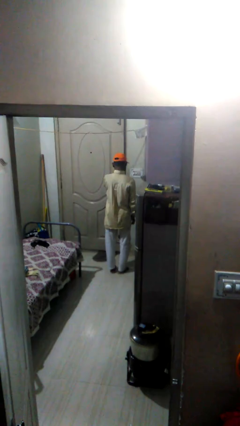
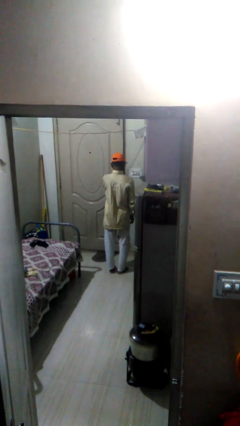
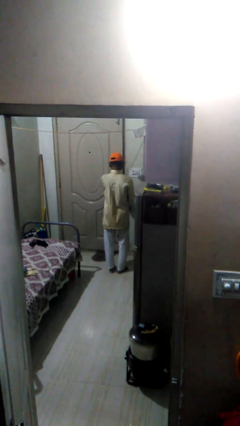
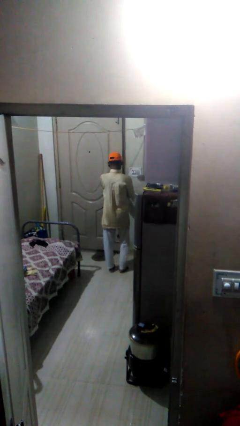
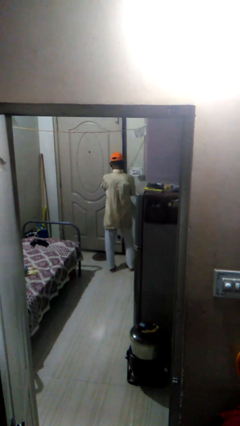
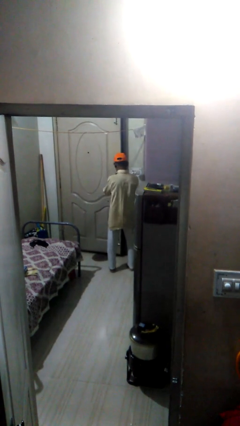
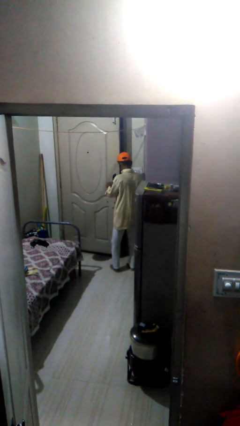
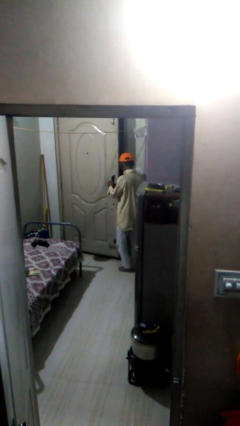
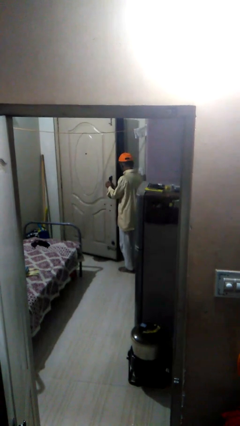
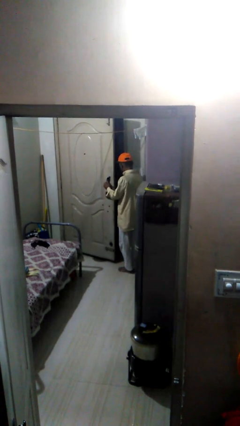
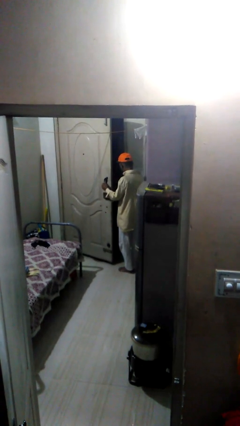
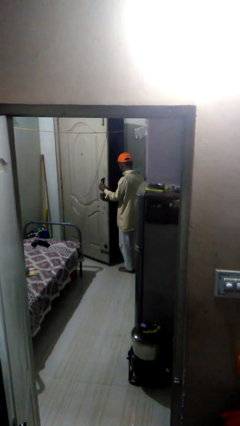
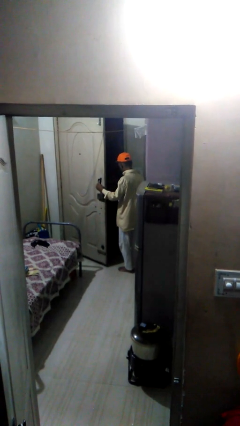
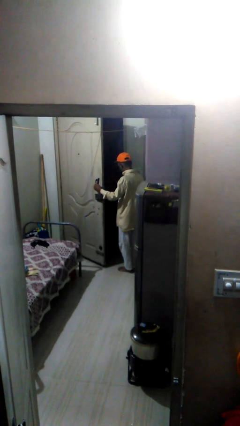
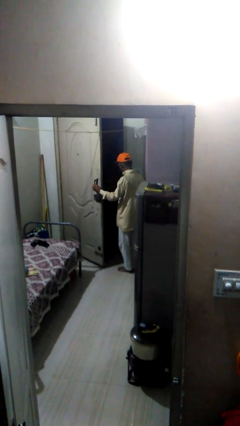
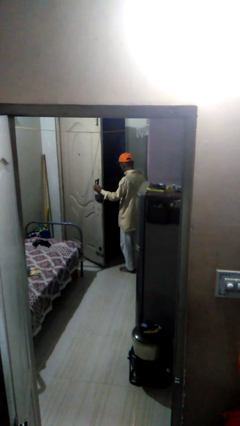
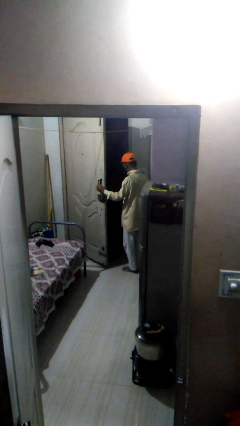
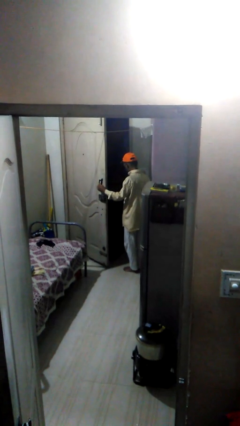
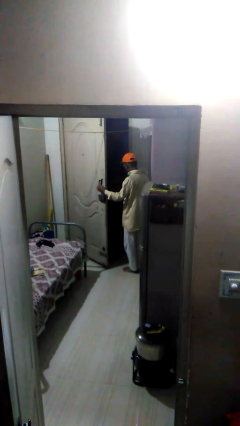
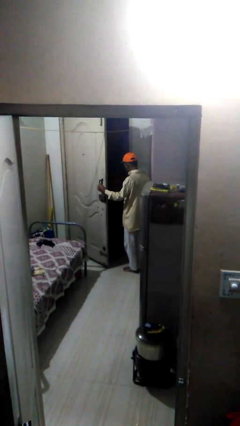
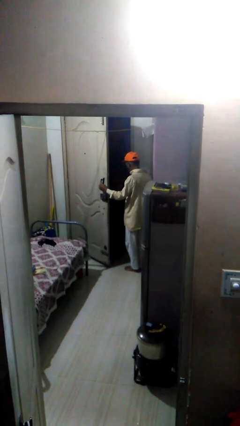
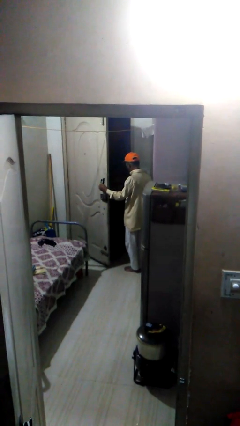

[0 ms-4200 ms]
person opens facility door

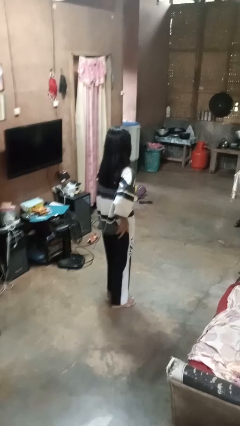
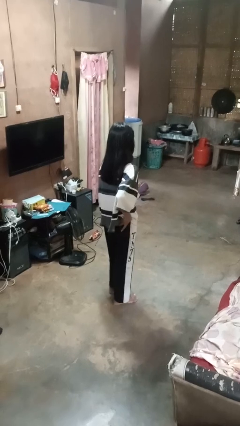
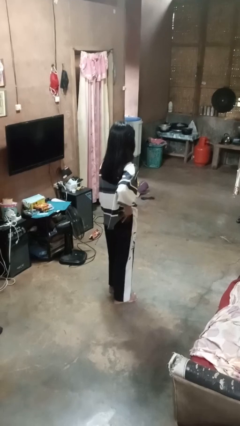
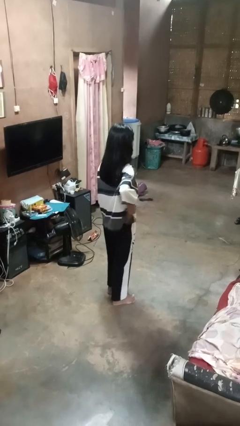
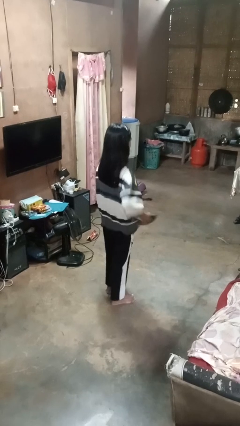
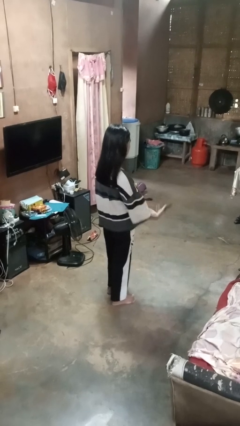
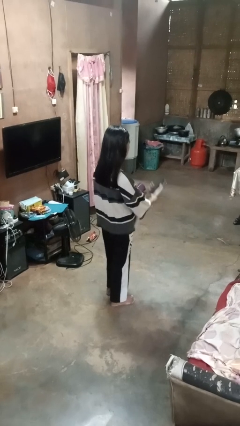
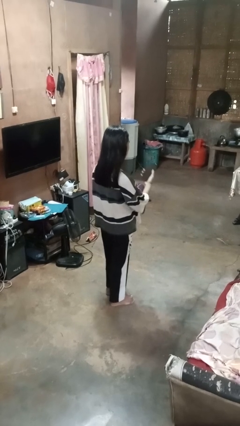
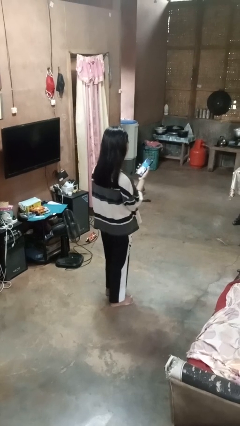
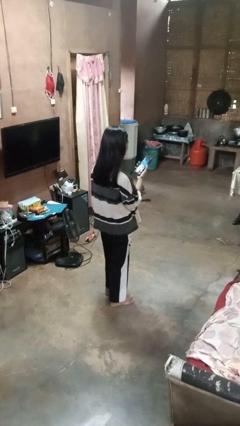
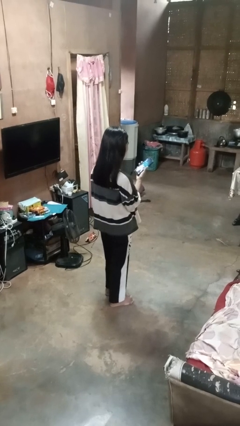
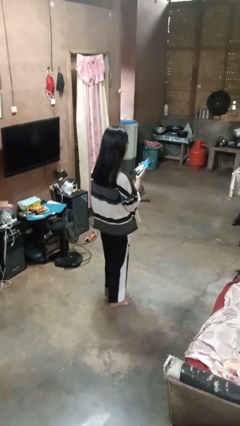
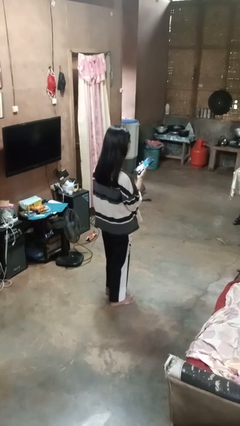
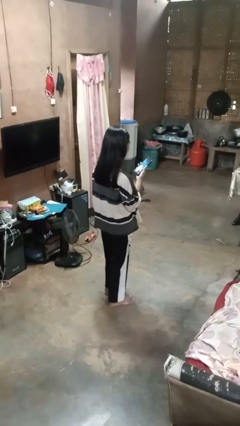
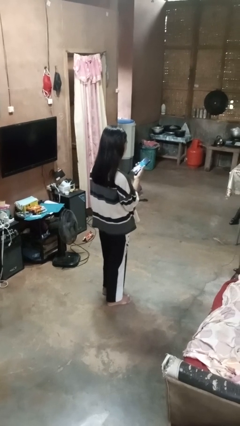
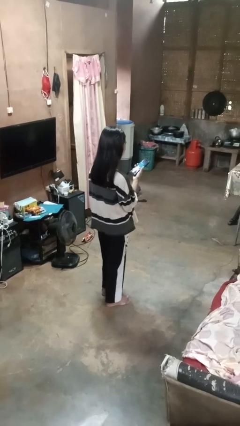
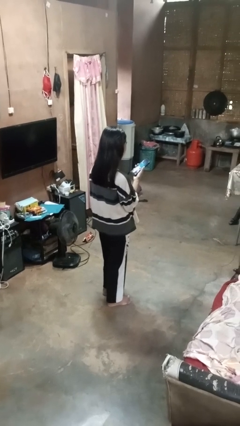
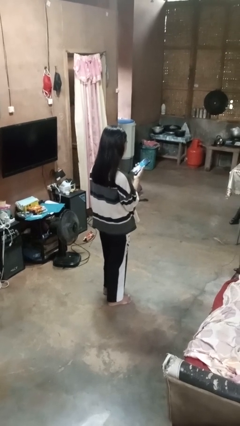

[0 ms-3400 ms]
person takes phone from pocket

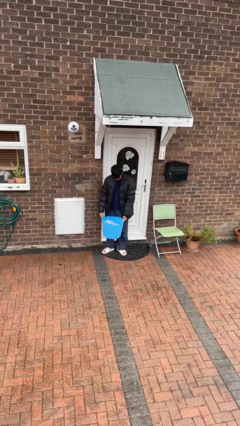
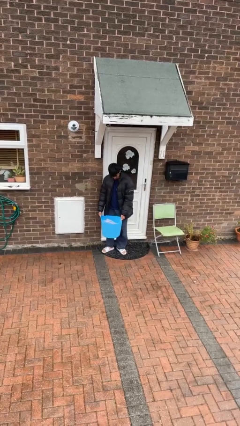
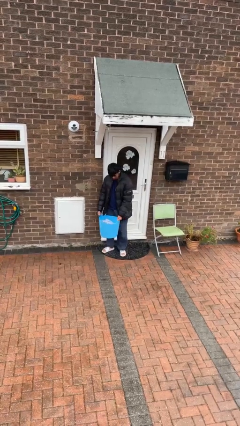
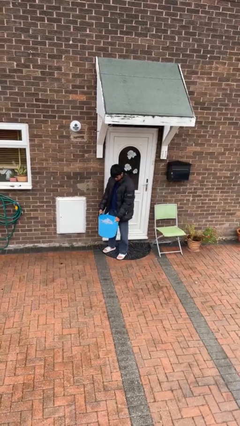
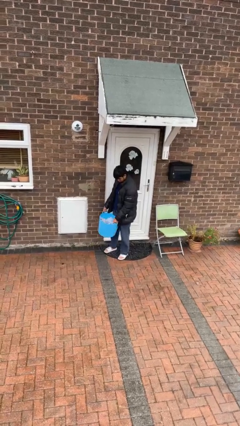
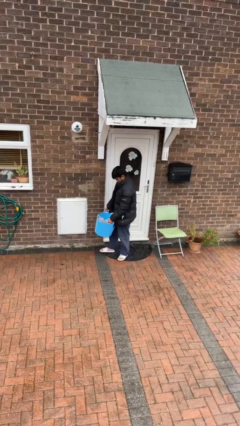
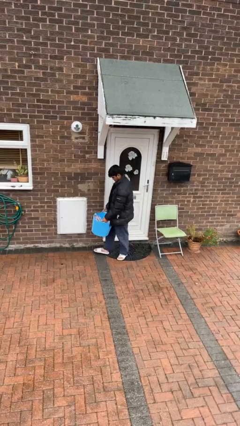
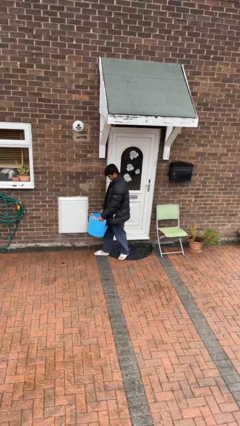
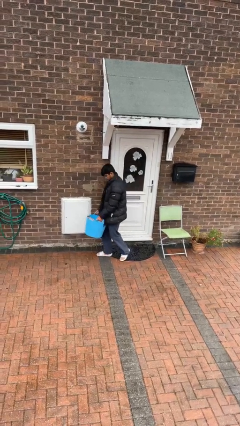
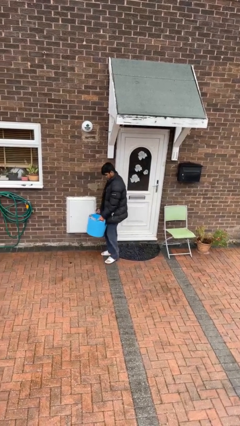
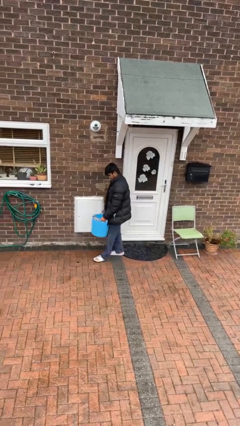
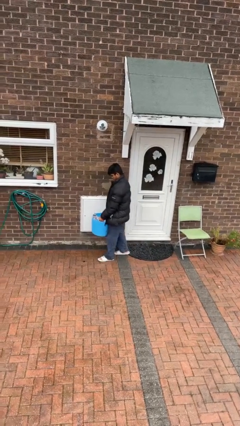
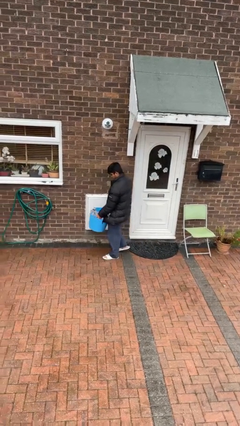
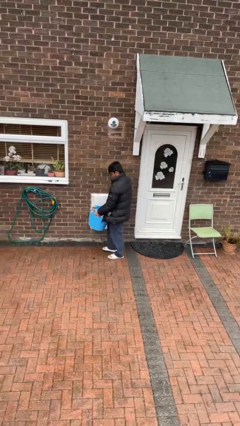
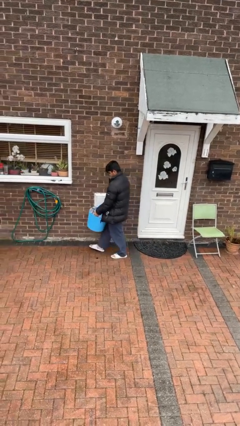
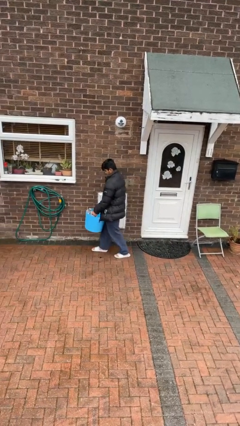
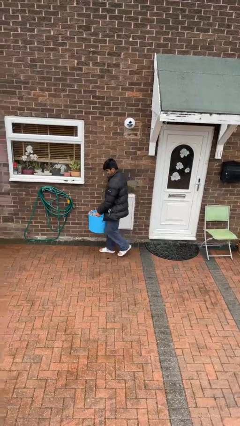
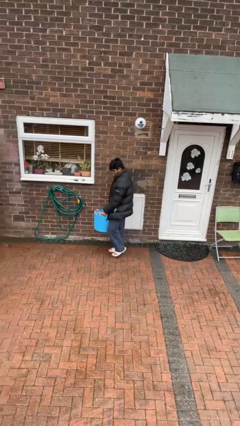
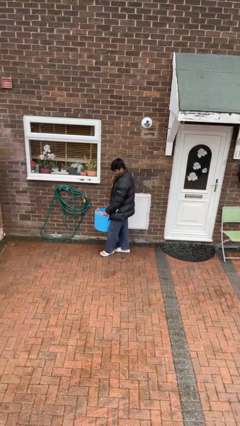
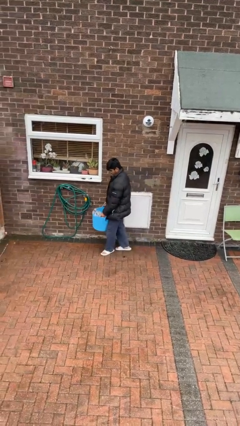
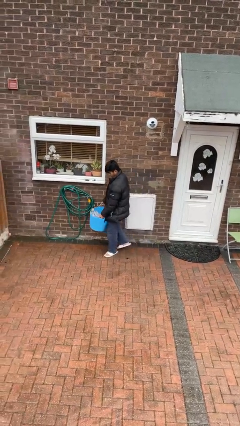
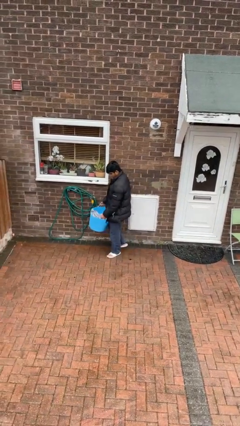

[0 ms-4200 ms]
person carries laundry basket

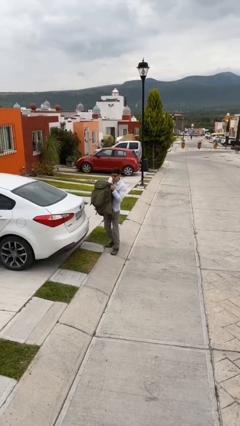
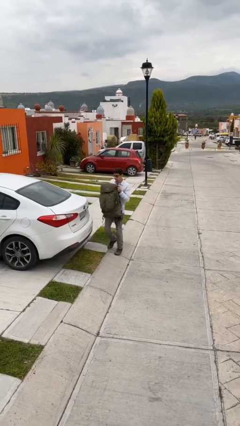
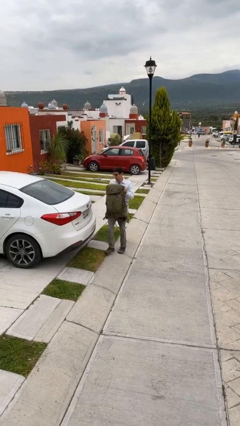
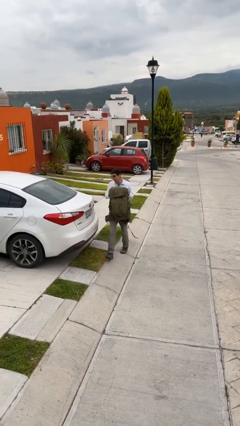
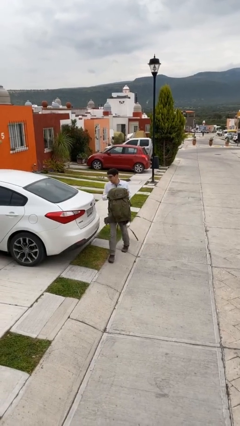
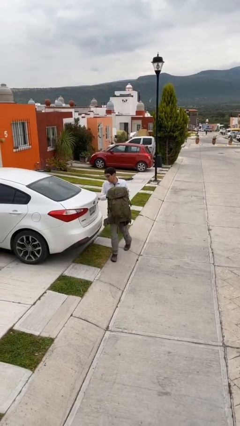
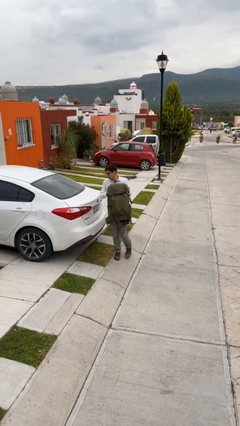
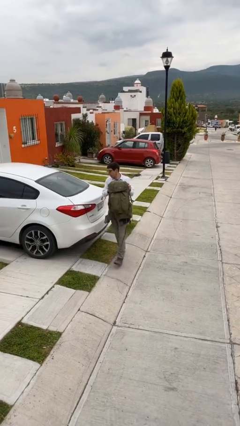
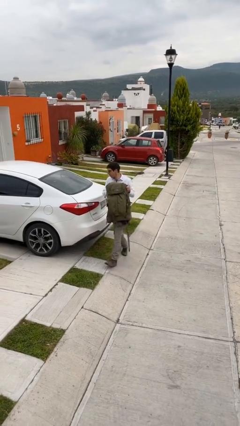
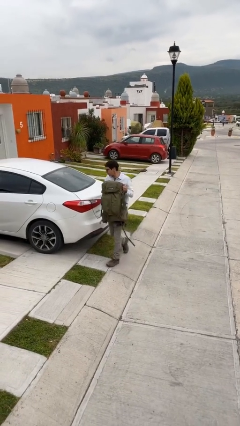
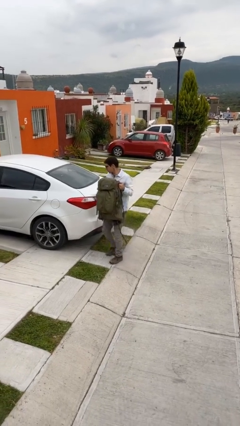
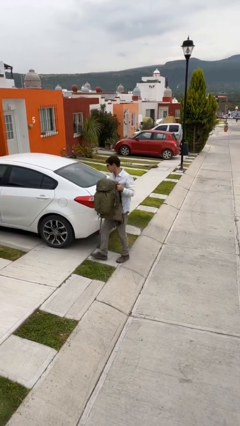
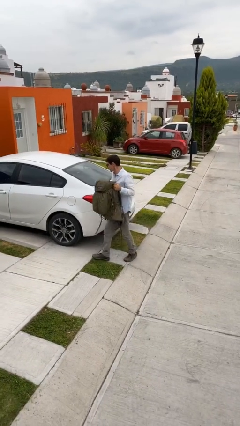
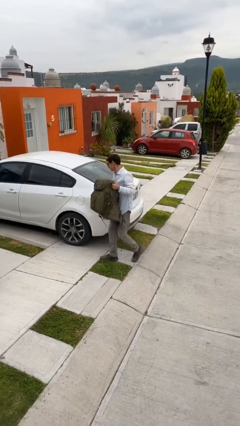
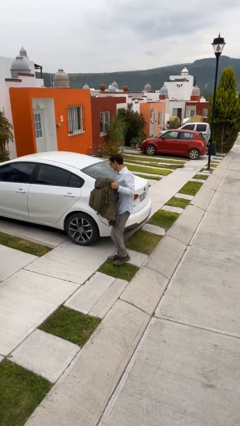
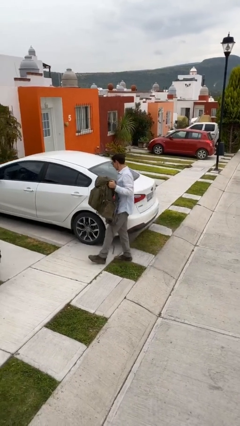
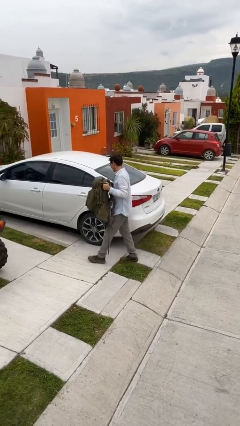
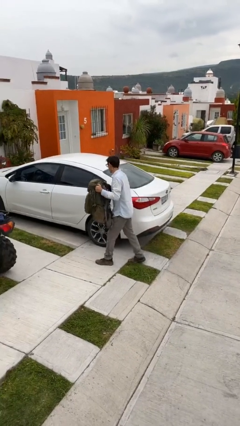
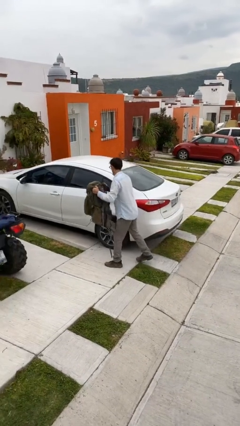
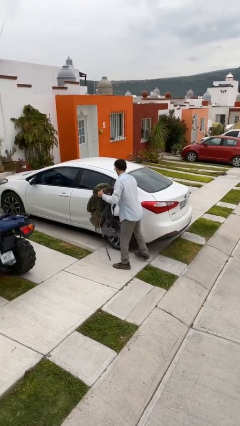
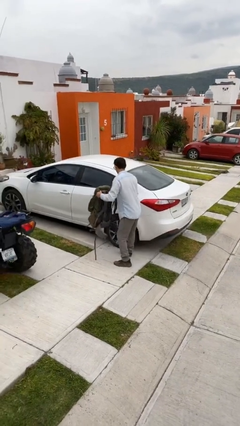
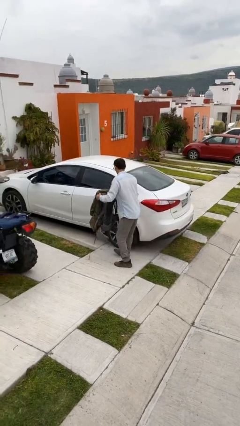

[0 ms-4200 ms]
person carries heavy object

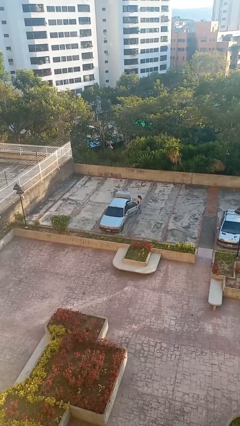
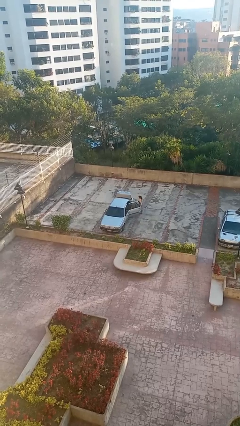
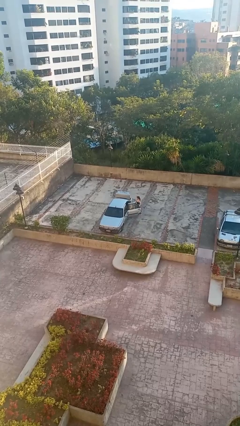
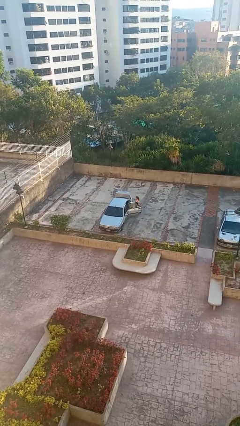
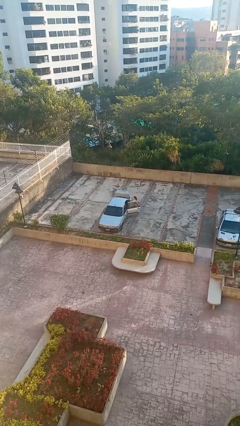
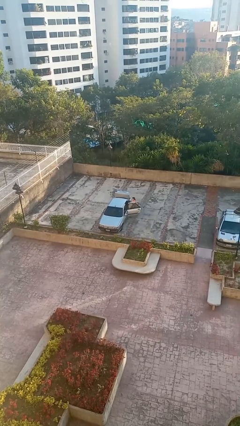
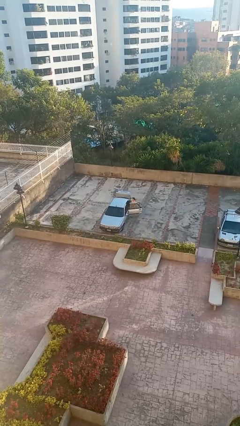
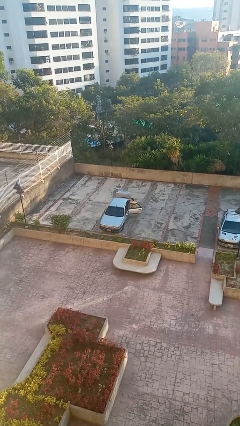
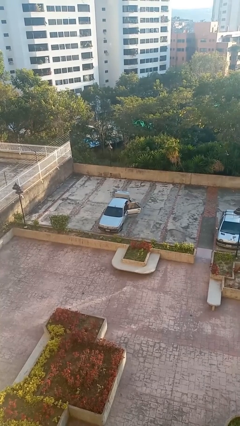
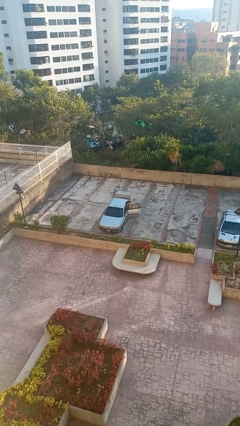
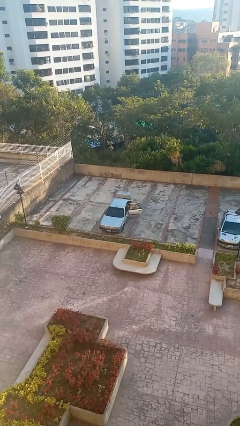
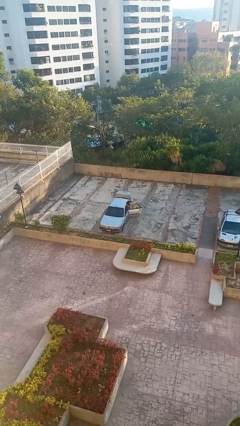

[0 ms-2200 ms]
car picks up person
